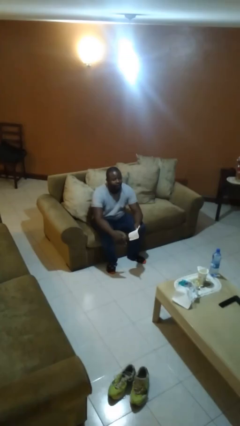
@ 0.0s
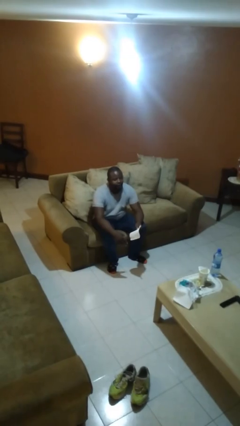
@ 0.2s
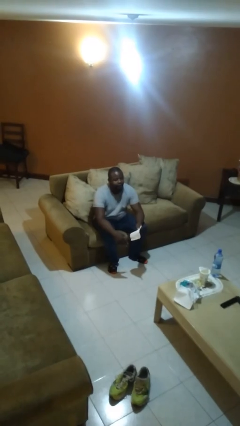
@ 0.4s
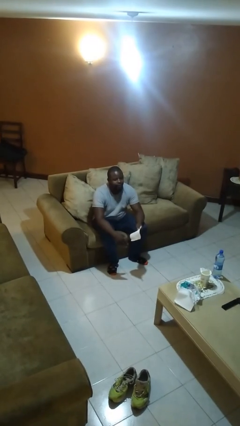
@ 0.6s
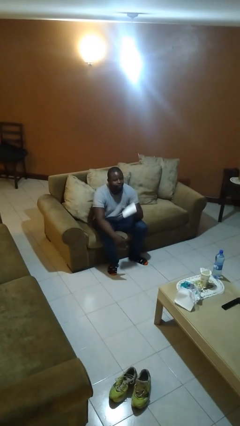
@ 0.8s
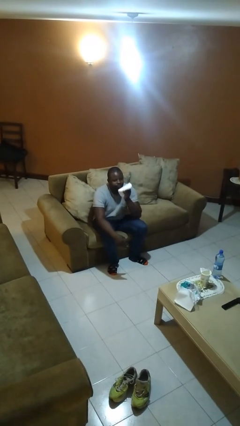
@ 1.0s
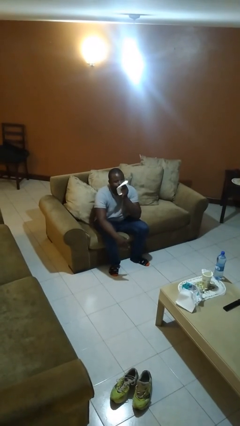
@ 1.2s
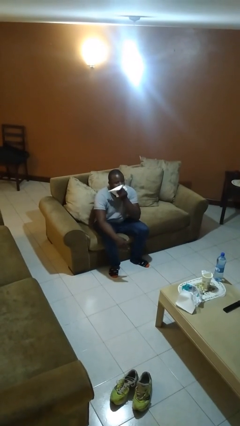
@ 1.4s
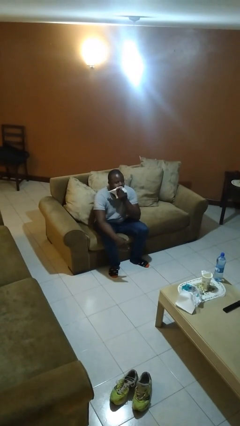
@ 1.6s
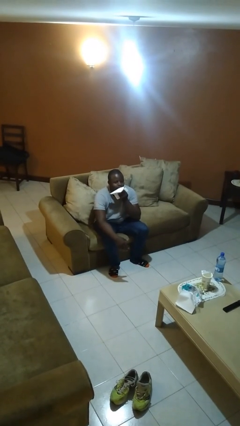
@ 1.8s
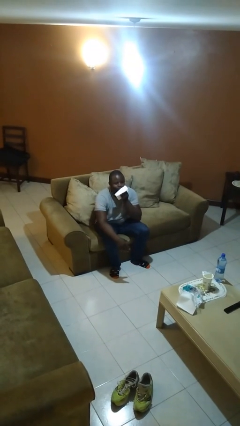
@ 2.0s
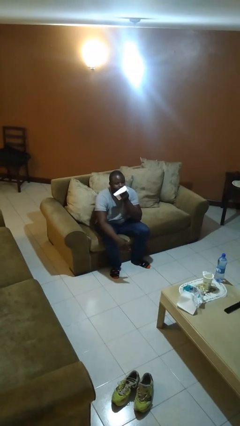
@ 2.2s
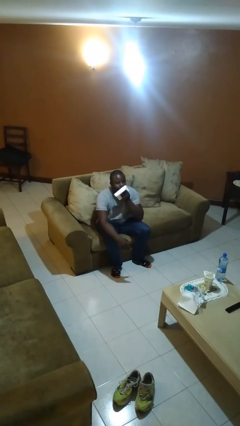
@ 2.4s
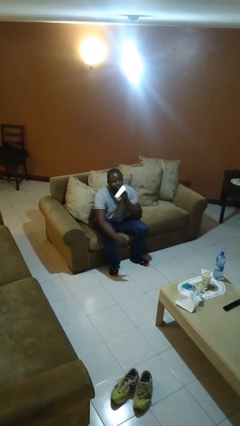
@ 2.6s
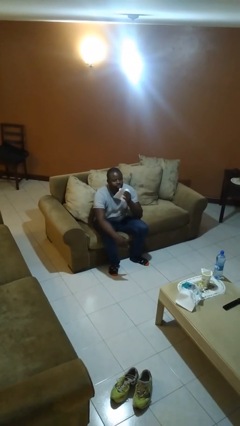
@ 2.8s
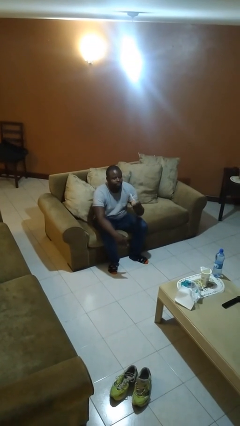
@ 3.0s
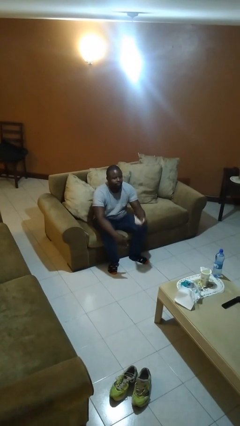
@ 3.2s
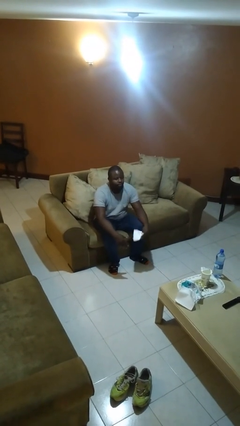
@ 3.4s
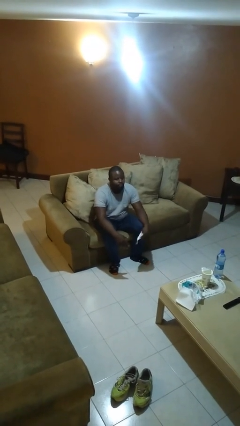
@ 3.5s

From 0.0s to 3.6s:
person wipes mouth with napkin

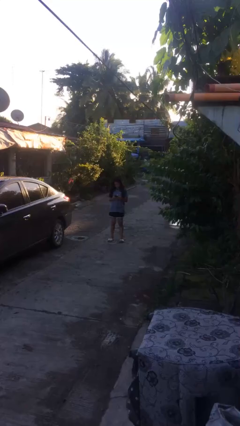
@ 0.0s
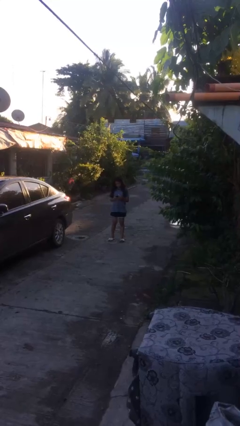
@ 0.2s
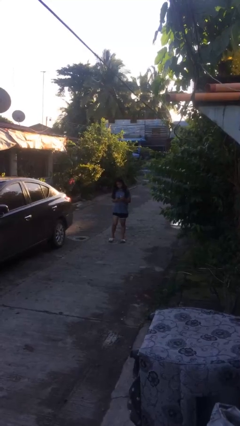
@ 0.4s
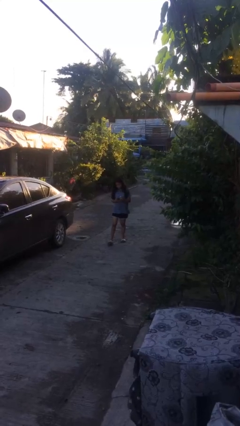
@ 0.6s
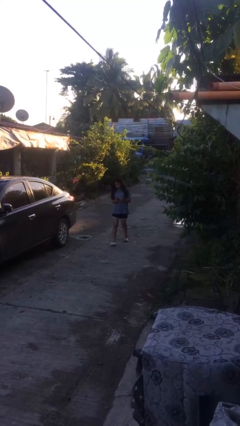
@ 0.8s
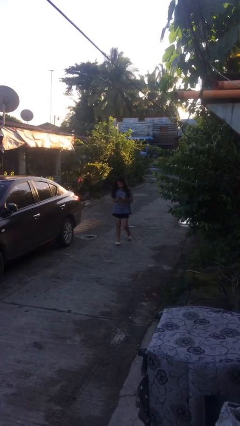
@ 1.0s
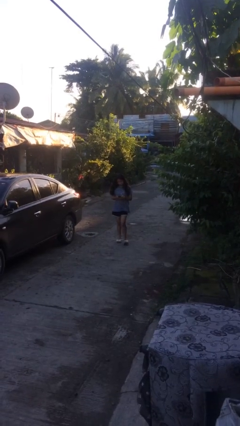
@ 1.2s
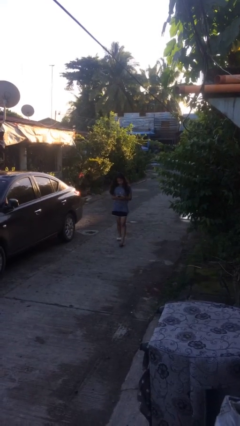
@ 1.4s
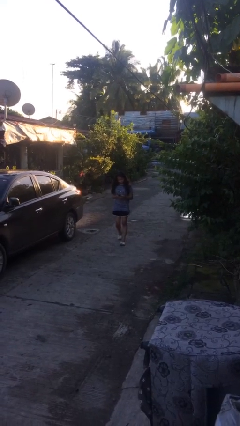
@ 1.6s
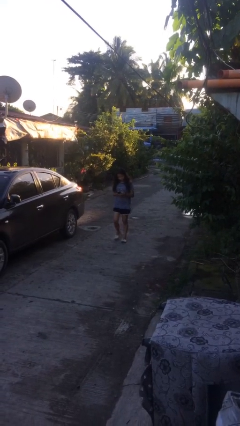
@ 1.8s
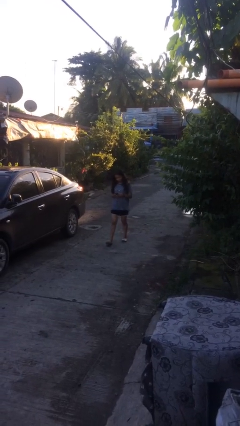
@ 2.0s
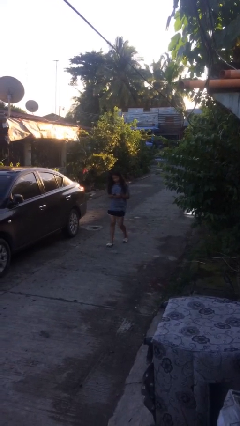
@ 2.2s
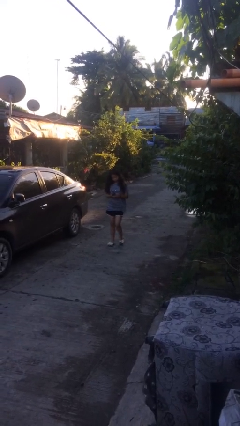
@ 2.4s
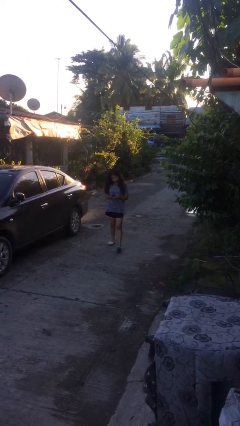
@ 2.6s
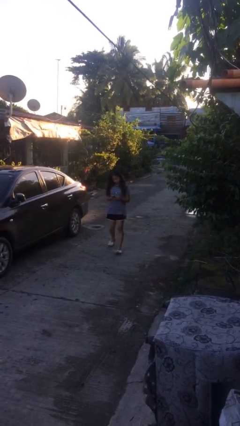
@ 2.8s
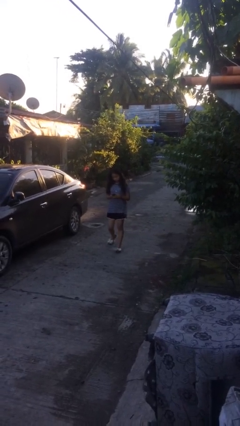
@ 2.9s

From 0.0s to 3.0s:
person texts on phone

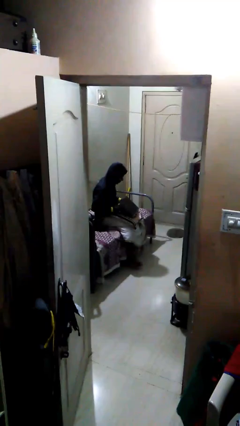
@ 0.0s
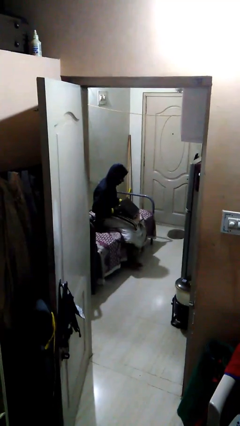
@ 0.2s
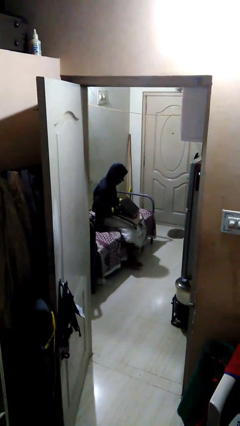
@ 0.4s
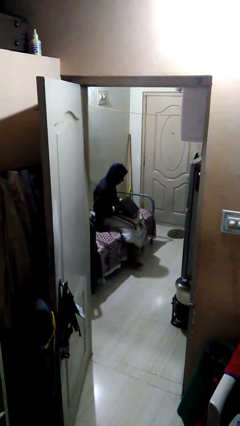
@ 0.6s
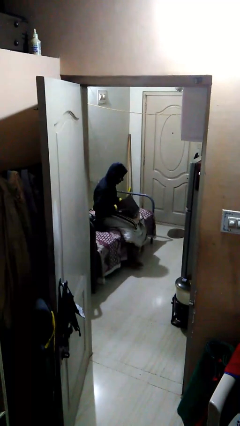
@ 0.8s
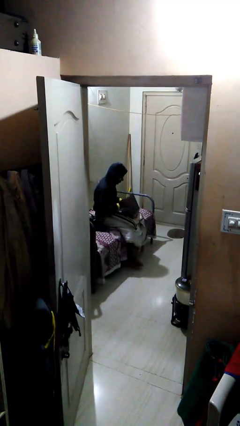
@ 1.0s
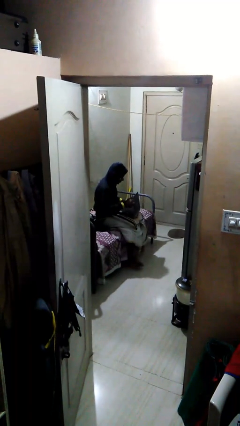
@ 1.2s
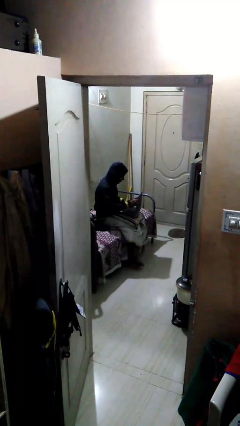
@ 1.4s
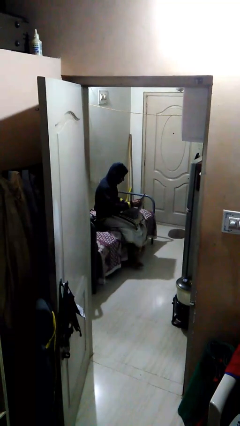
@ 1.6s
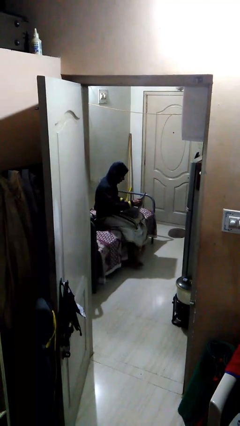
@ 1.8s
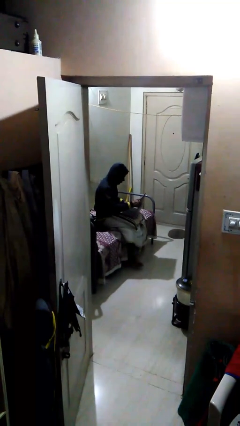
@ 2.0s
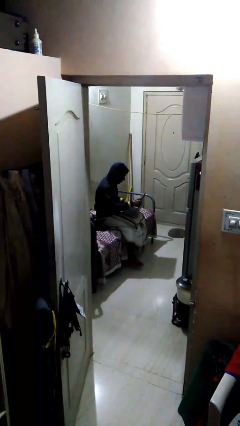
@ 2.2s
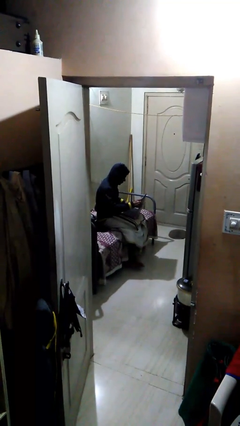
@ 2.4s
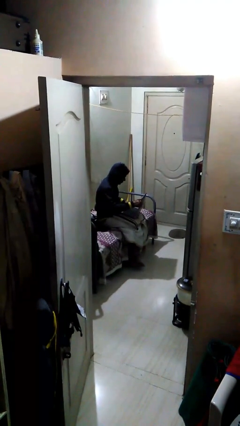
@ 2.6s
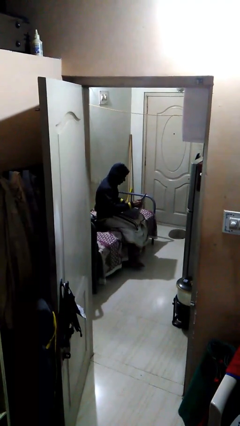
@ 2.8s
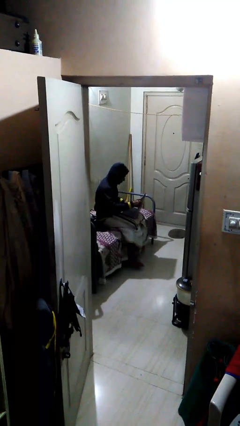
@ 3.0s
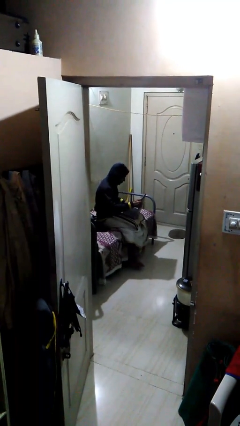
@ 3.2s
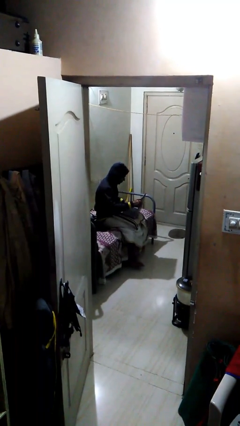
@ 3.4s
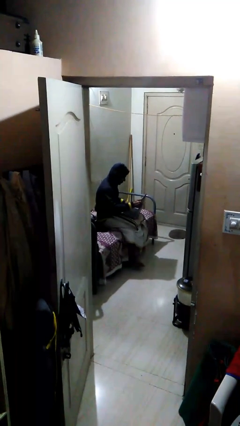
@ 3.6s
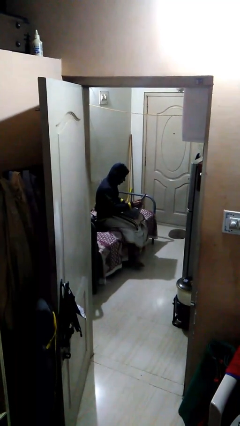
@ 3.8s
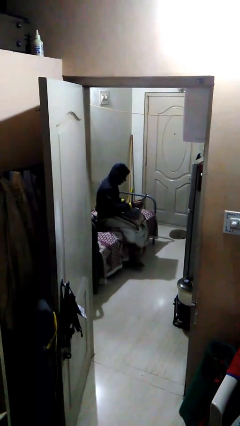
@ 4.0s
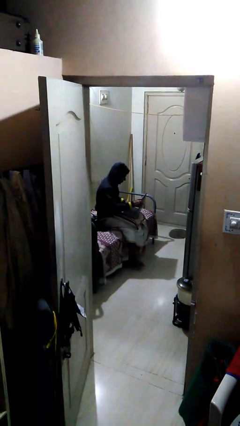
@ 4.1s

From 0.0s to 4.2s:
person interacts with laptop

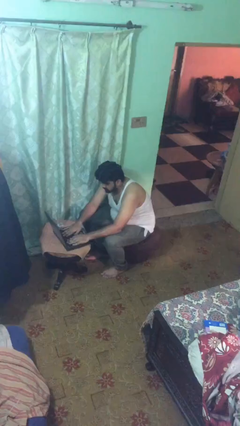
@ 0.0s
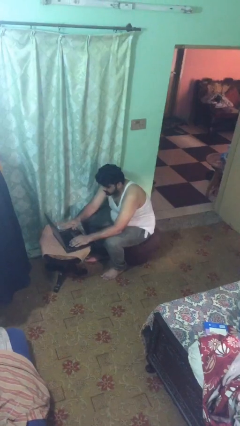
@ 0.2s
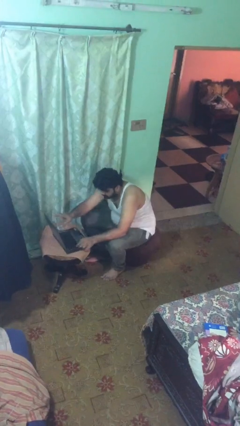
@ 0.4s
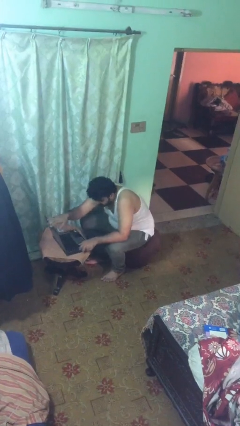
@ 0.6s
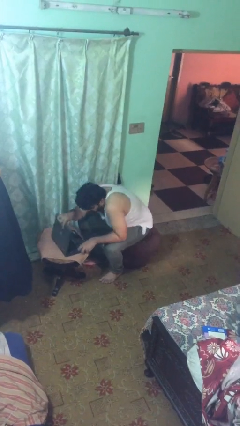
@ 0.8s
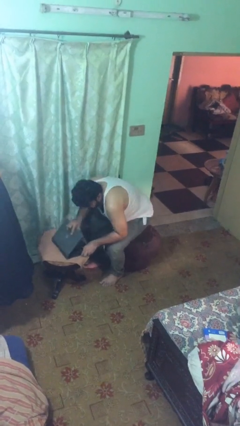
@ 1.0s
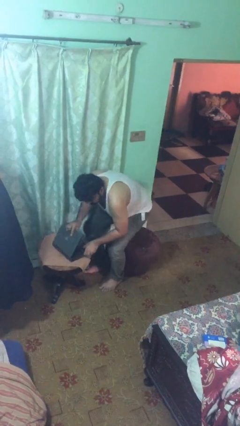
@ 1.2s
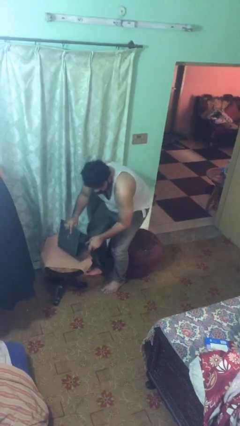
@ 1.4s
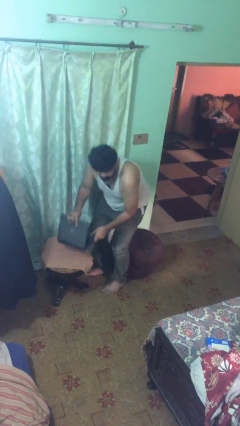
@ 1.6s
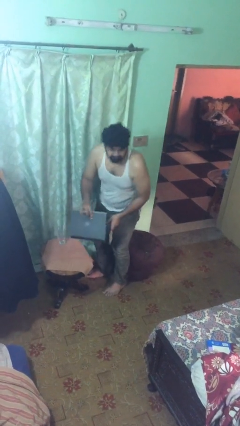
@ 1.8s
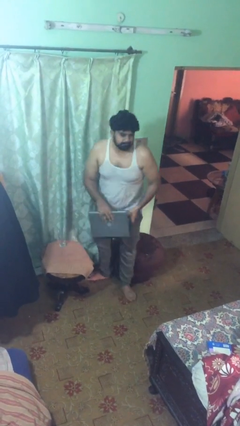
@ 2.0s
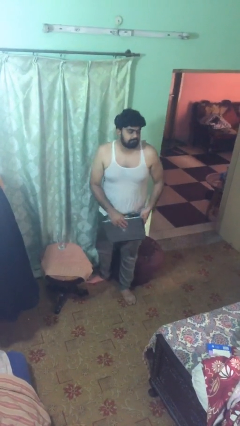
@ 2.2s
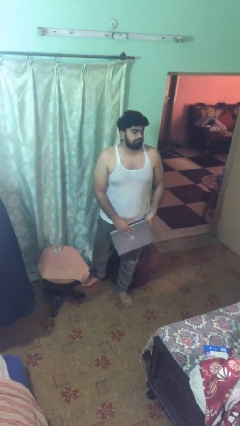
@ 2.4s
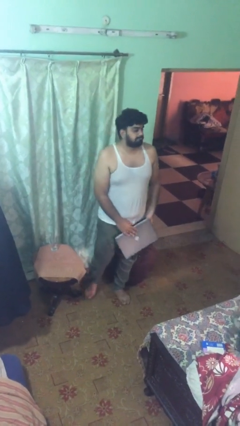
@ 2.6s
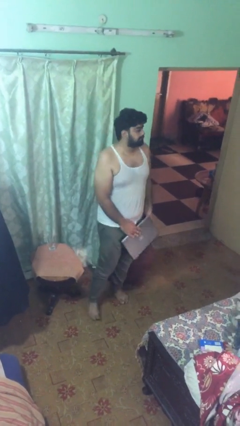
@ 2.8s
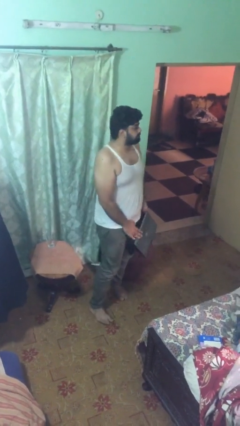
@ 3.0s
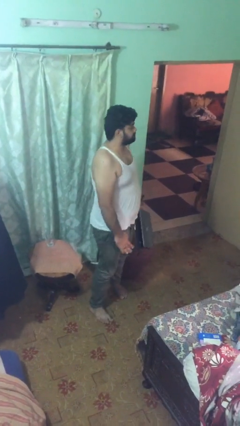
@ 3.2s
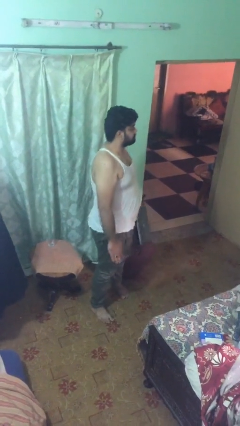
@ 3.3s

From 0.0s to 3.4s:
person stands up

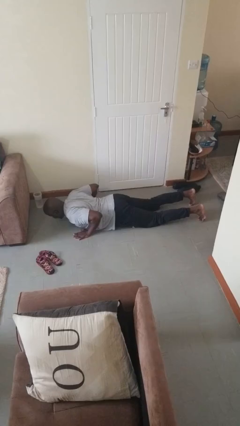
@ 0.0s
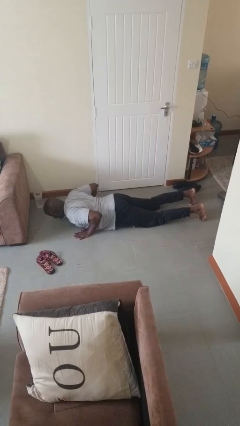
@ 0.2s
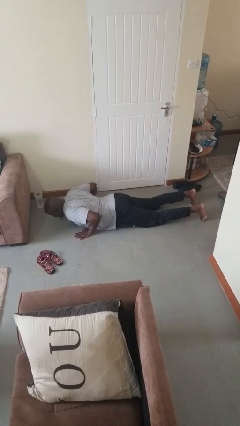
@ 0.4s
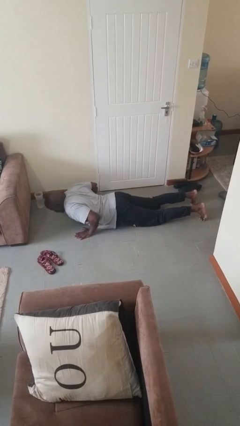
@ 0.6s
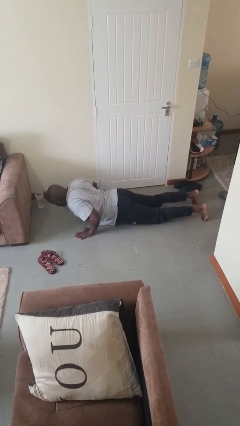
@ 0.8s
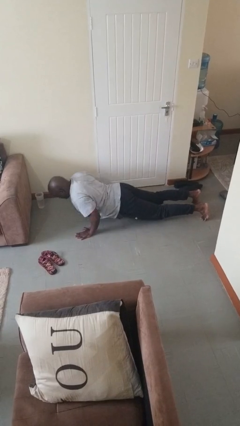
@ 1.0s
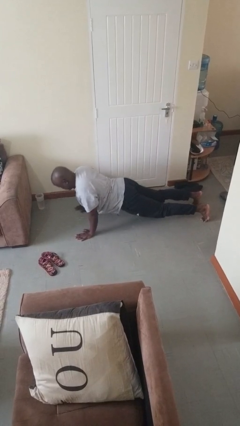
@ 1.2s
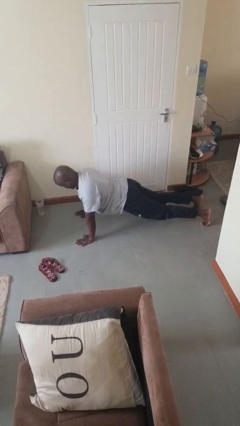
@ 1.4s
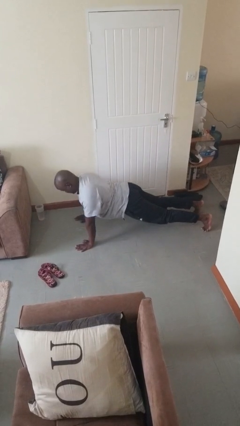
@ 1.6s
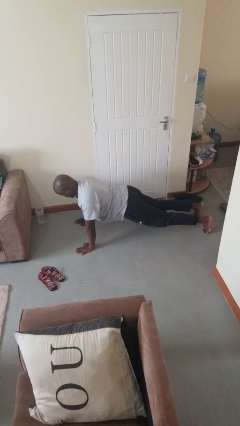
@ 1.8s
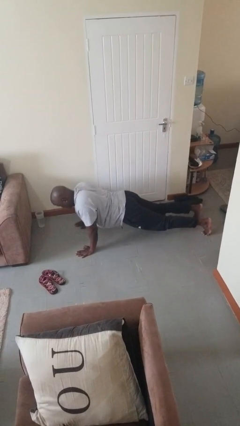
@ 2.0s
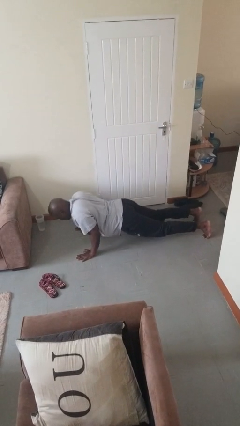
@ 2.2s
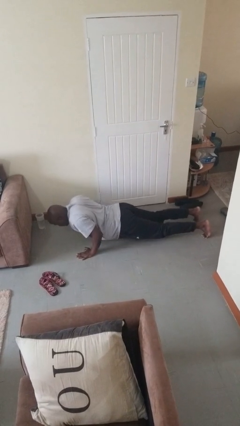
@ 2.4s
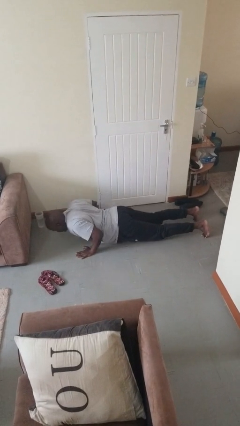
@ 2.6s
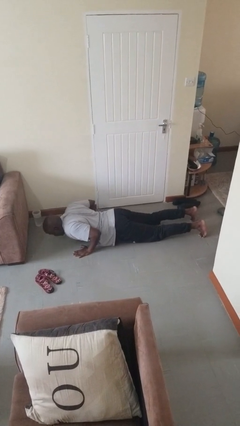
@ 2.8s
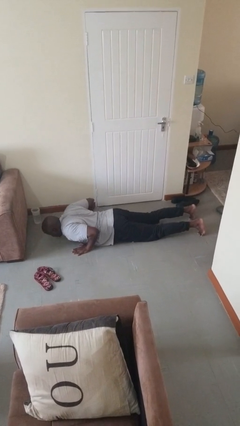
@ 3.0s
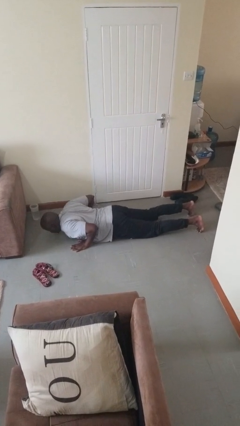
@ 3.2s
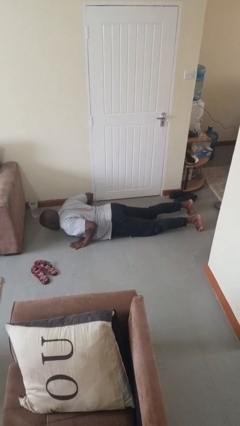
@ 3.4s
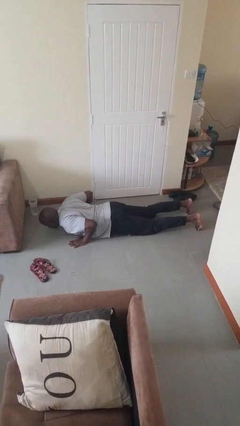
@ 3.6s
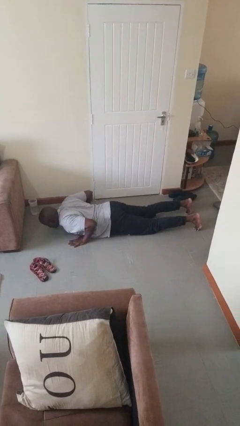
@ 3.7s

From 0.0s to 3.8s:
person exercises with pushup
